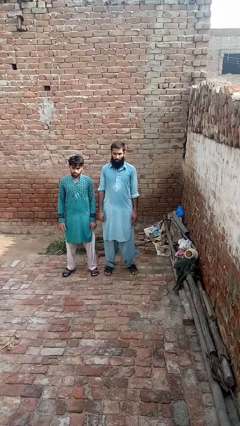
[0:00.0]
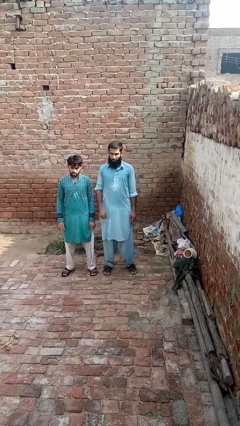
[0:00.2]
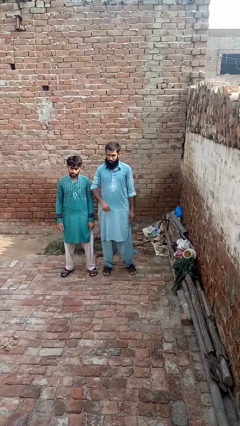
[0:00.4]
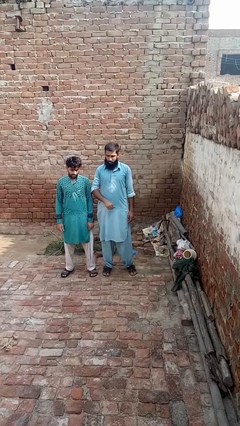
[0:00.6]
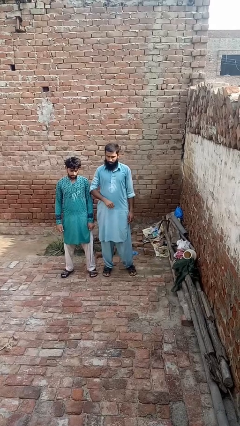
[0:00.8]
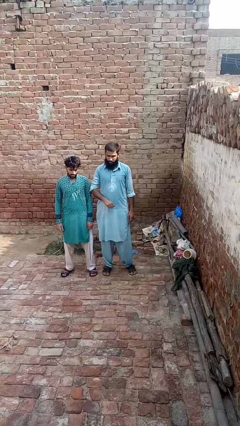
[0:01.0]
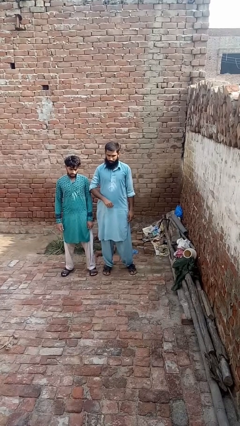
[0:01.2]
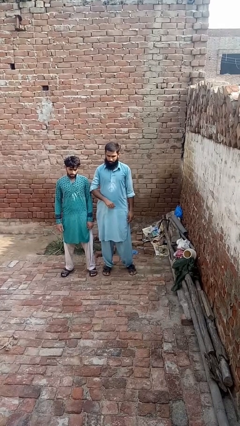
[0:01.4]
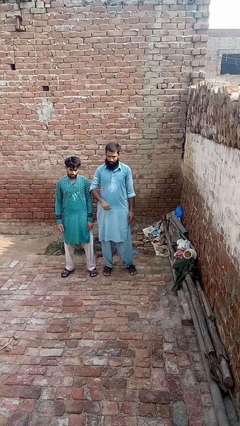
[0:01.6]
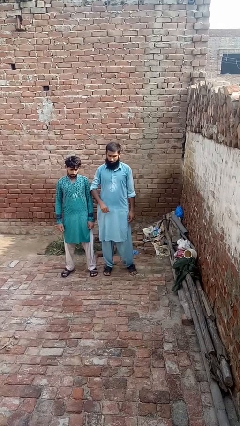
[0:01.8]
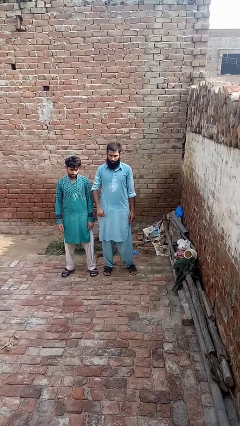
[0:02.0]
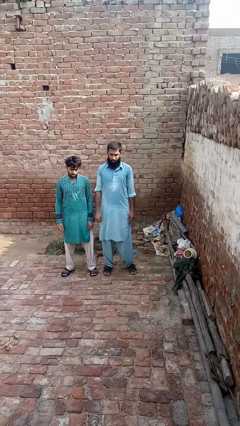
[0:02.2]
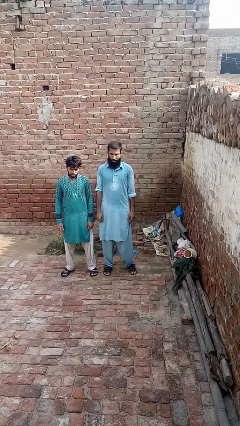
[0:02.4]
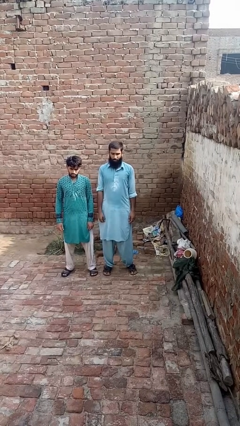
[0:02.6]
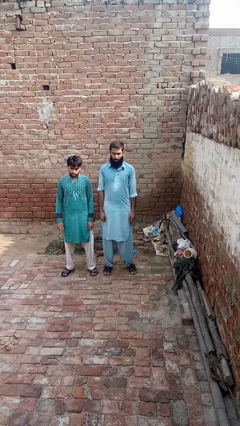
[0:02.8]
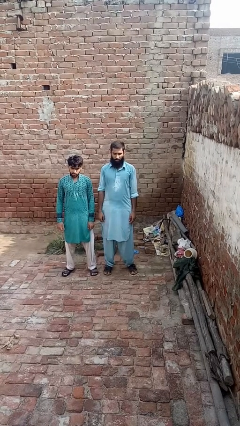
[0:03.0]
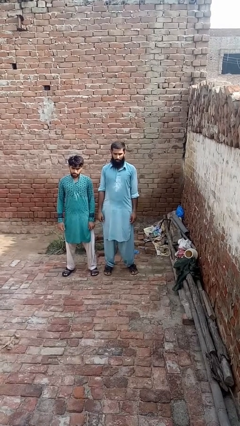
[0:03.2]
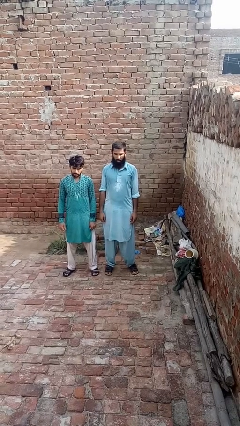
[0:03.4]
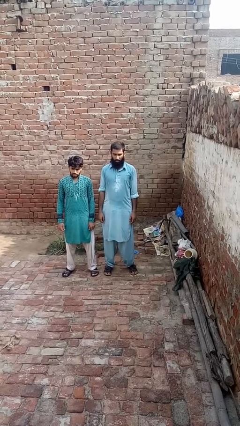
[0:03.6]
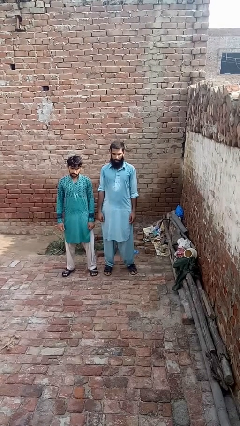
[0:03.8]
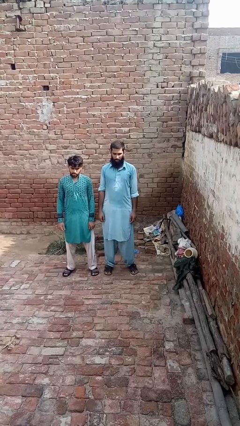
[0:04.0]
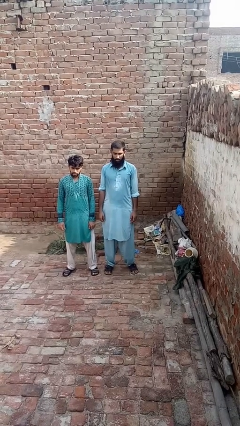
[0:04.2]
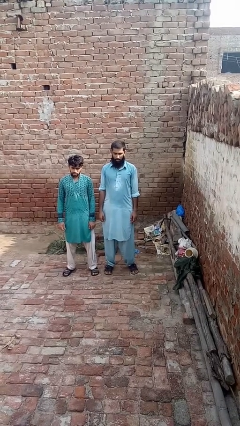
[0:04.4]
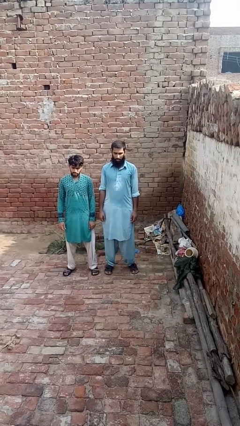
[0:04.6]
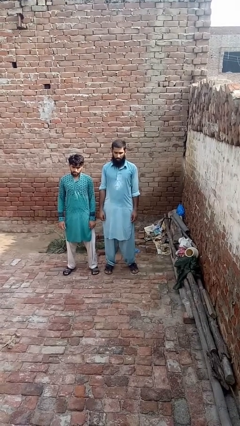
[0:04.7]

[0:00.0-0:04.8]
person nudges person with elbow

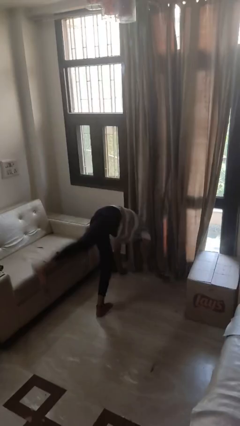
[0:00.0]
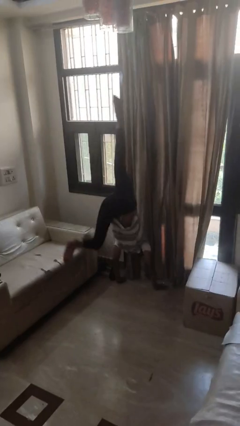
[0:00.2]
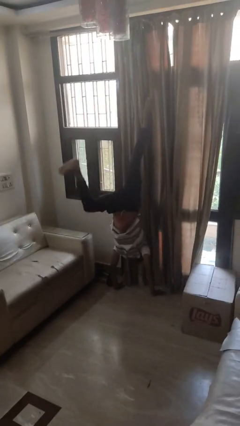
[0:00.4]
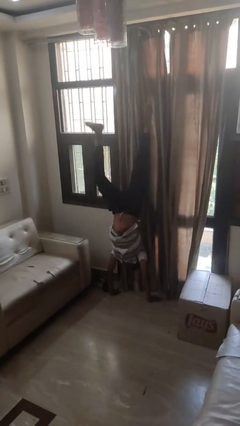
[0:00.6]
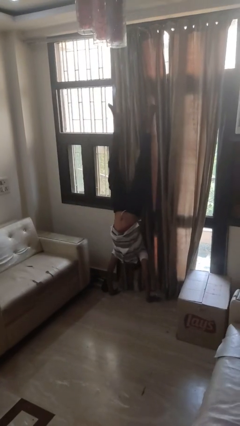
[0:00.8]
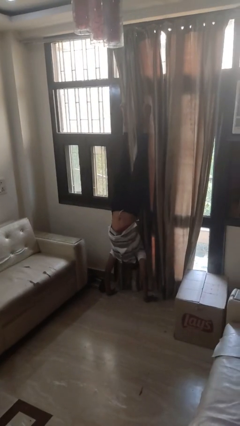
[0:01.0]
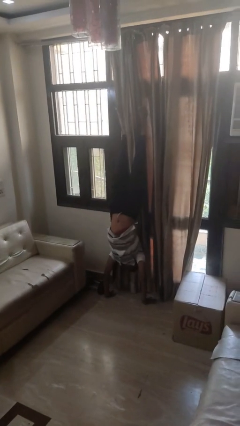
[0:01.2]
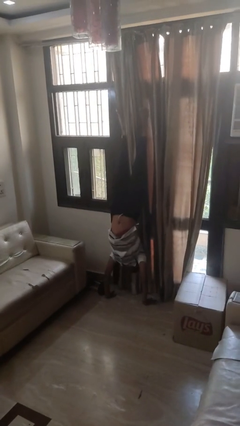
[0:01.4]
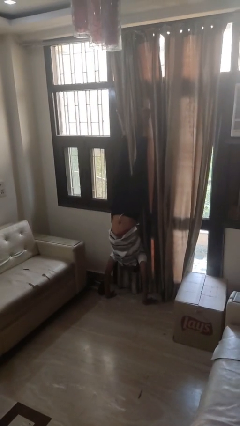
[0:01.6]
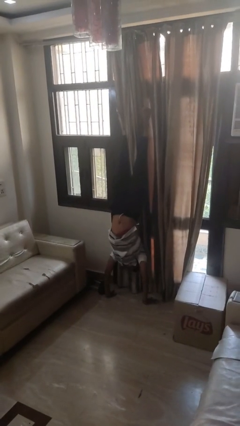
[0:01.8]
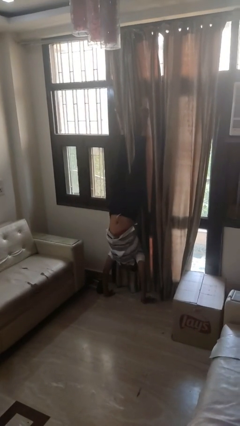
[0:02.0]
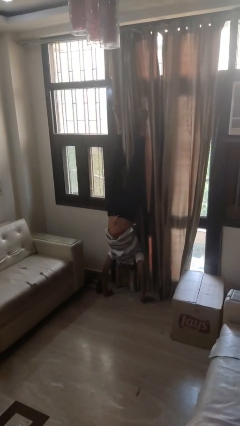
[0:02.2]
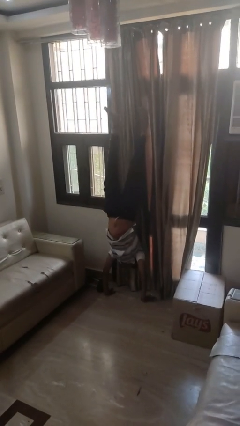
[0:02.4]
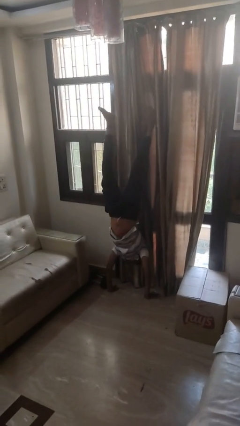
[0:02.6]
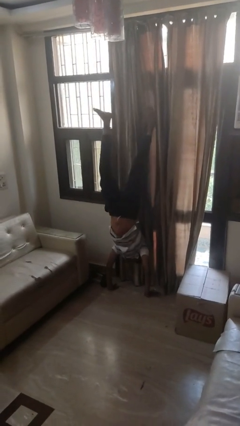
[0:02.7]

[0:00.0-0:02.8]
person handstand

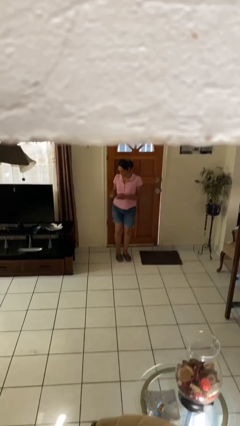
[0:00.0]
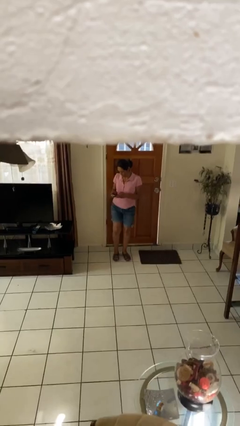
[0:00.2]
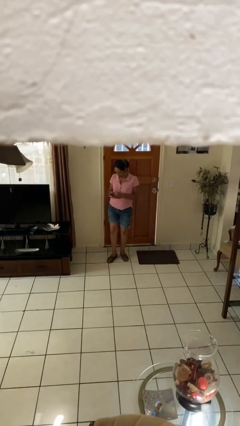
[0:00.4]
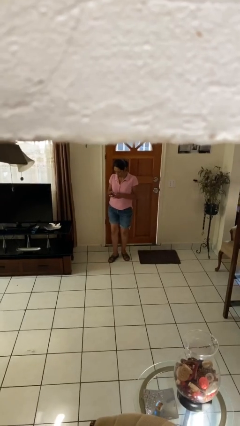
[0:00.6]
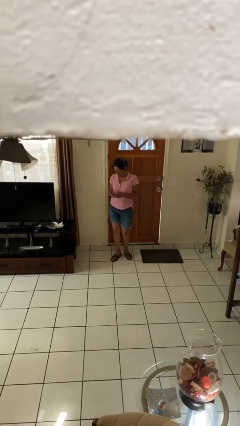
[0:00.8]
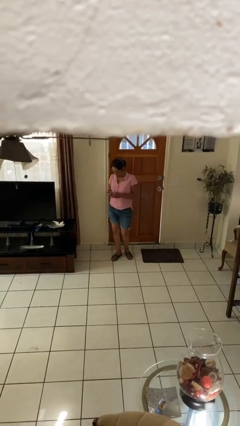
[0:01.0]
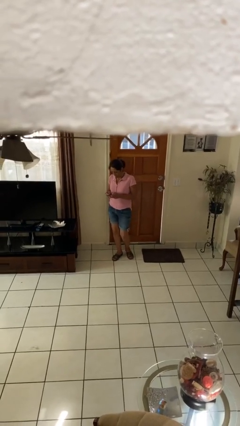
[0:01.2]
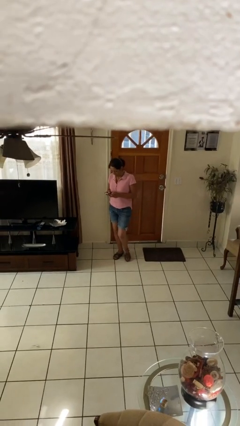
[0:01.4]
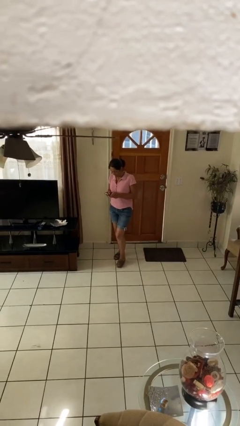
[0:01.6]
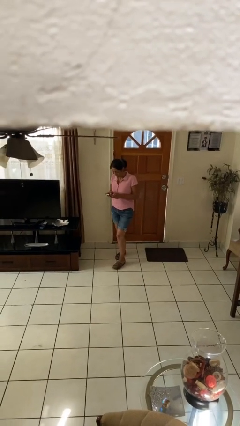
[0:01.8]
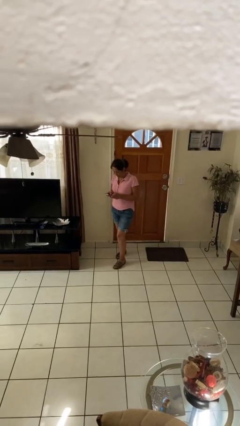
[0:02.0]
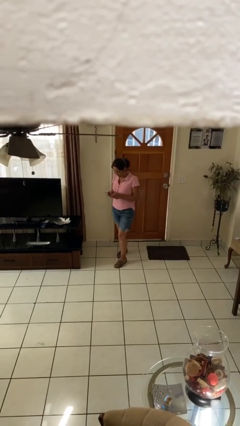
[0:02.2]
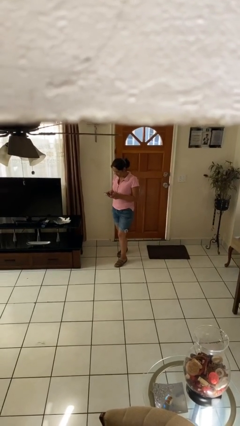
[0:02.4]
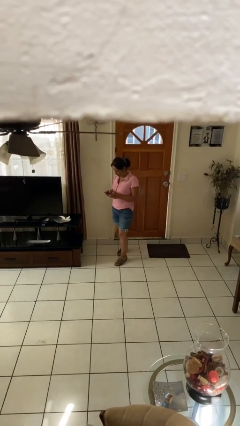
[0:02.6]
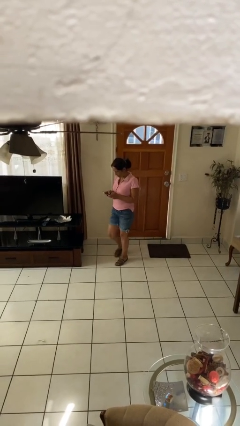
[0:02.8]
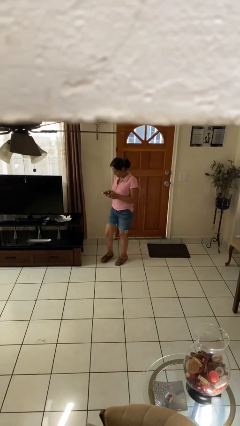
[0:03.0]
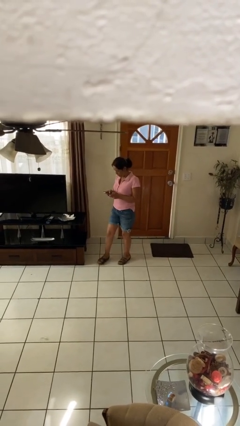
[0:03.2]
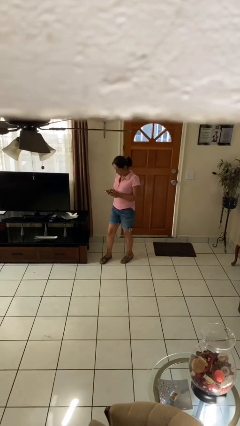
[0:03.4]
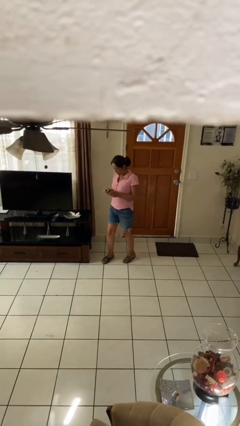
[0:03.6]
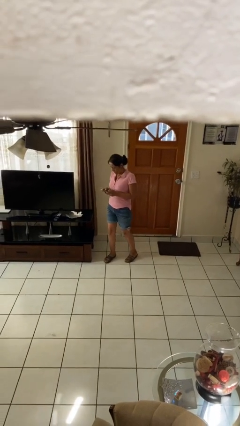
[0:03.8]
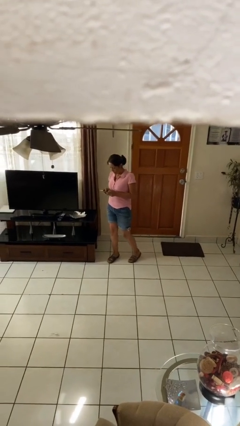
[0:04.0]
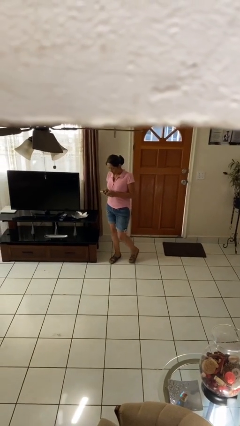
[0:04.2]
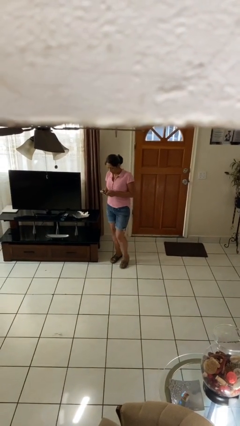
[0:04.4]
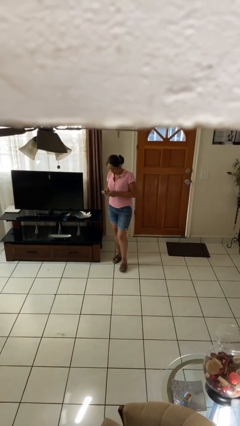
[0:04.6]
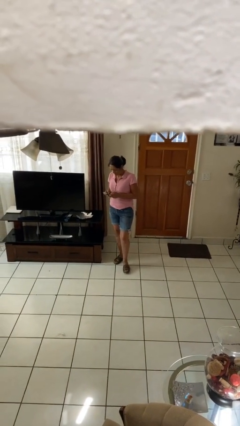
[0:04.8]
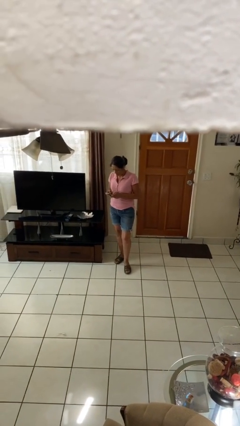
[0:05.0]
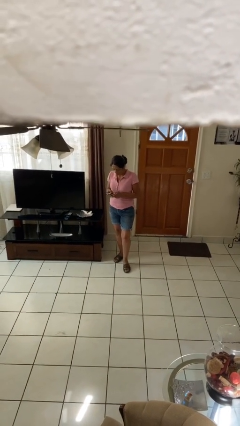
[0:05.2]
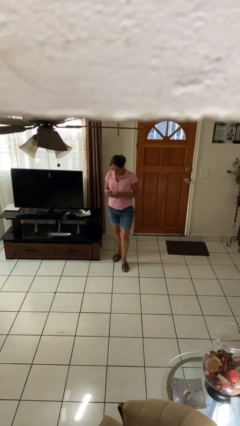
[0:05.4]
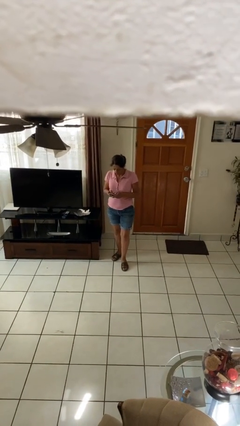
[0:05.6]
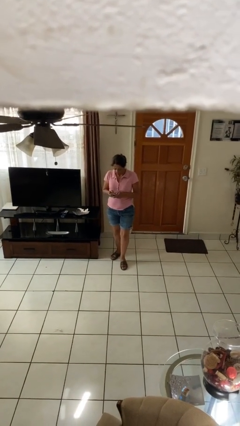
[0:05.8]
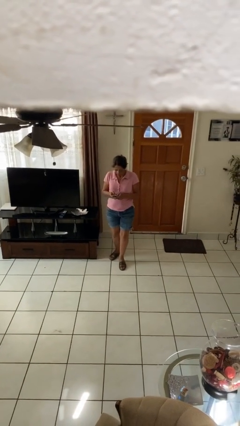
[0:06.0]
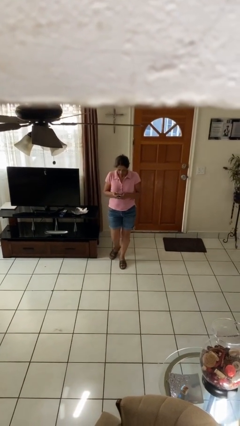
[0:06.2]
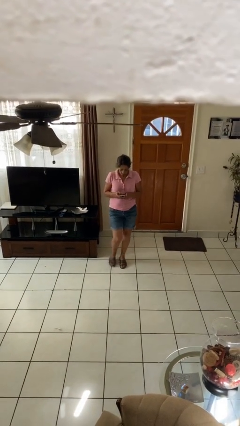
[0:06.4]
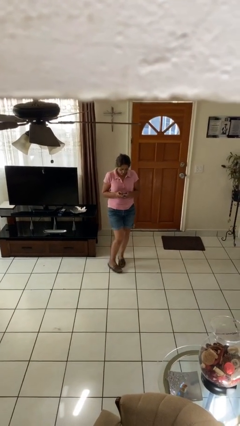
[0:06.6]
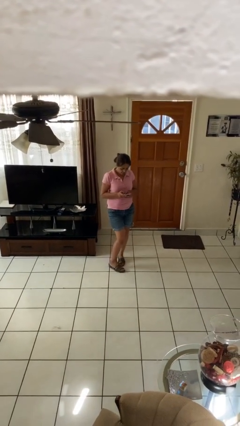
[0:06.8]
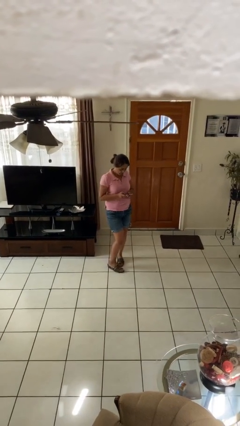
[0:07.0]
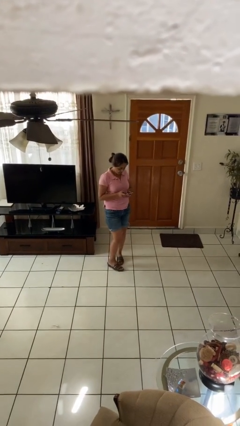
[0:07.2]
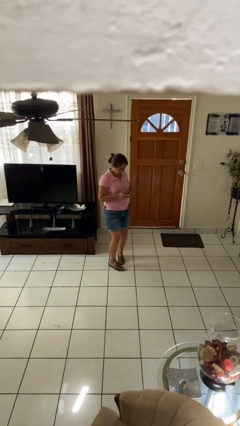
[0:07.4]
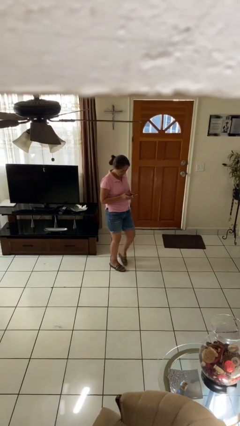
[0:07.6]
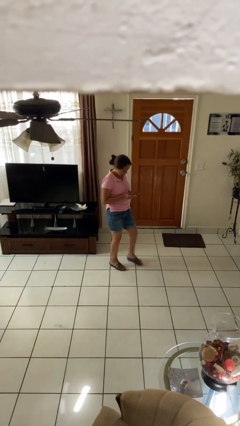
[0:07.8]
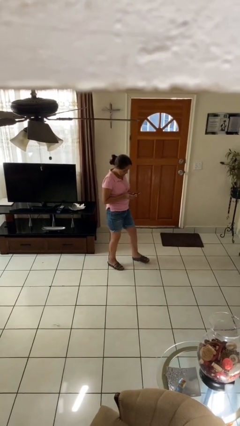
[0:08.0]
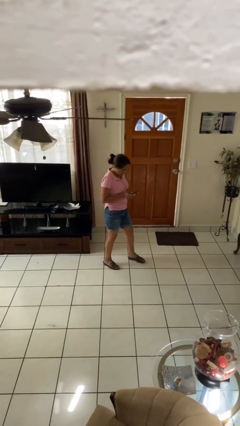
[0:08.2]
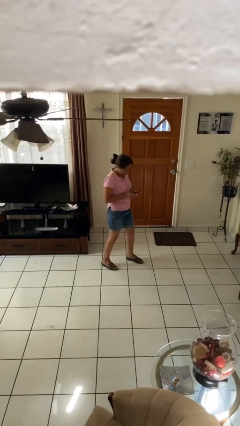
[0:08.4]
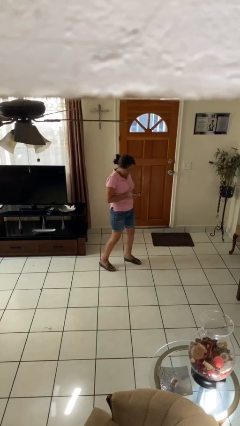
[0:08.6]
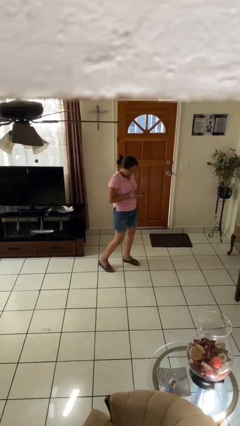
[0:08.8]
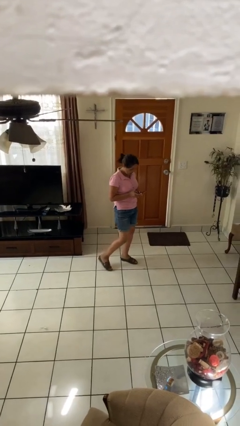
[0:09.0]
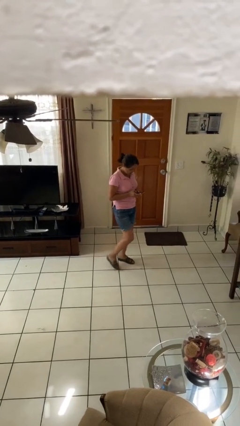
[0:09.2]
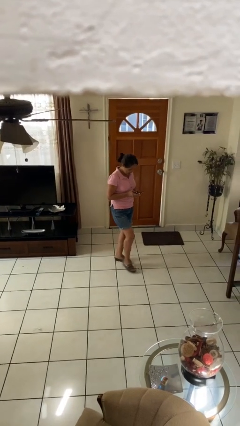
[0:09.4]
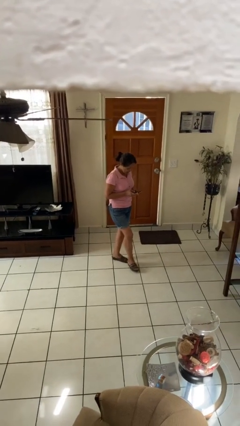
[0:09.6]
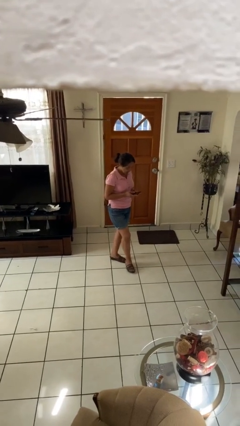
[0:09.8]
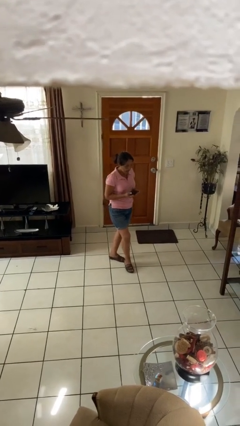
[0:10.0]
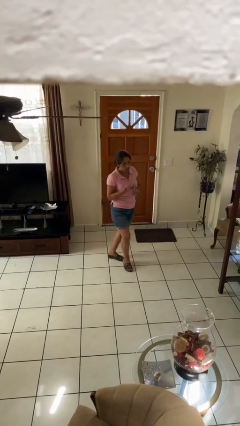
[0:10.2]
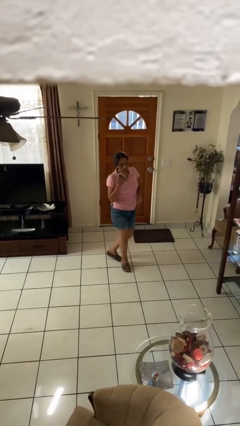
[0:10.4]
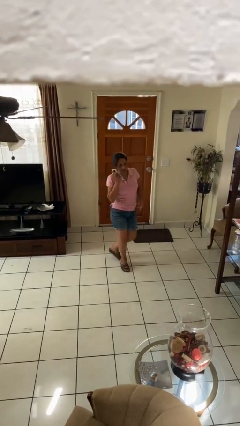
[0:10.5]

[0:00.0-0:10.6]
person texts on phone
